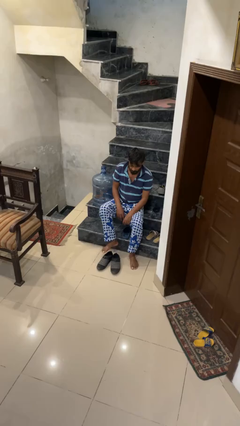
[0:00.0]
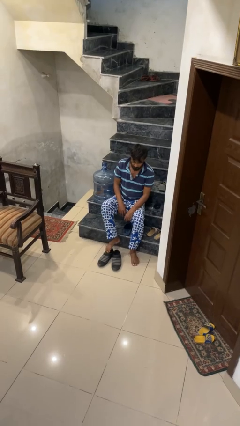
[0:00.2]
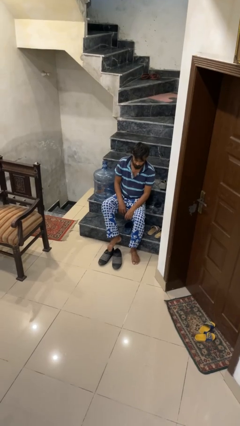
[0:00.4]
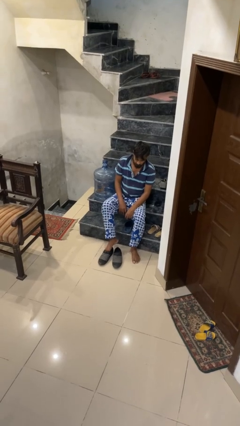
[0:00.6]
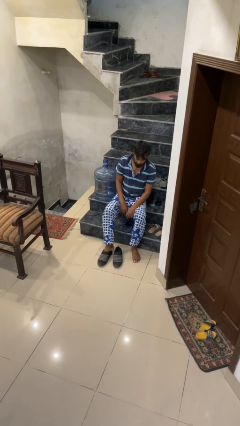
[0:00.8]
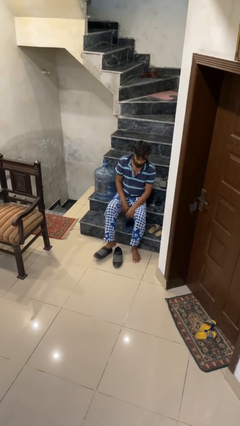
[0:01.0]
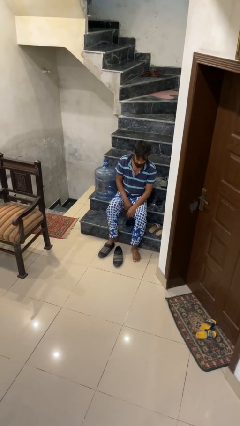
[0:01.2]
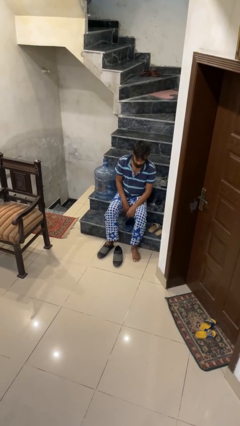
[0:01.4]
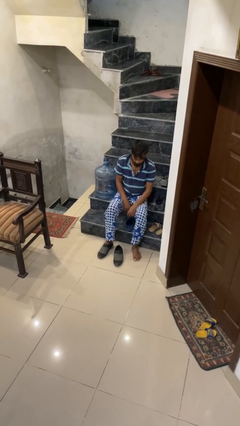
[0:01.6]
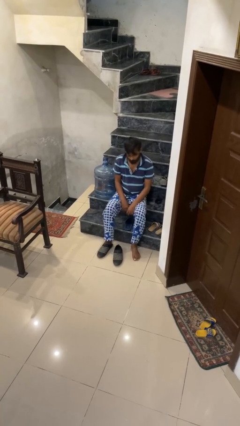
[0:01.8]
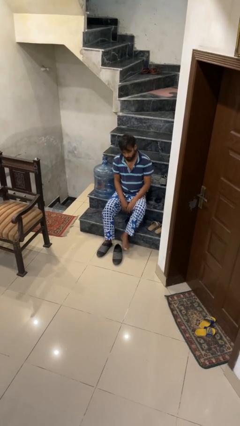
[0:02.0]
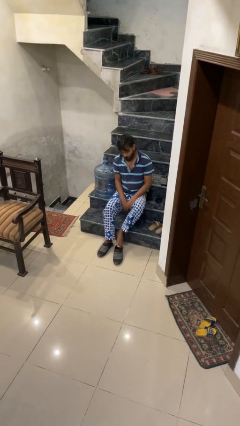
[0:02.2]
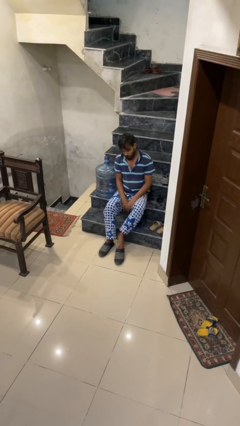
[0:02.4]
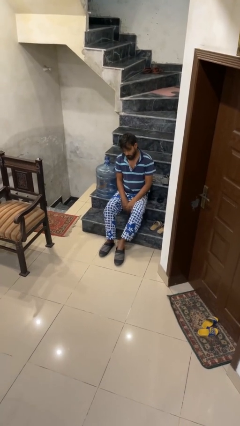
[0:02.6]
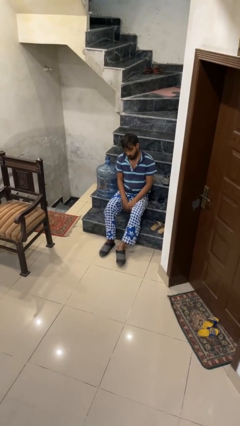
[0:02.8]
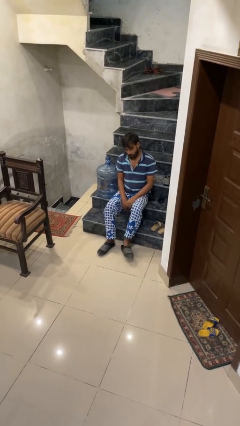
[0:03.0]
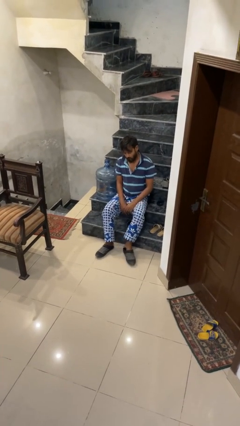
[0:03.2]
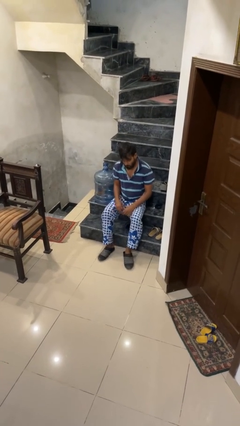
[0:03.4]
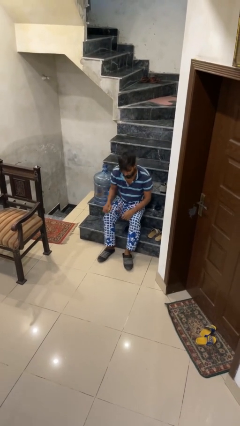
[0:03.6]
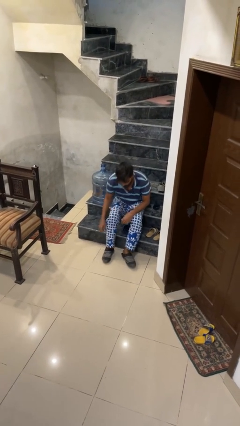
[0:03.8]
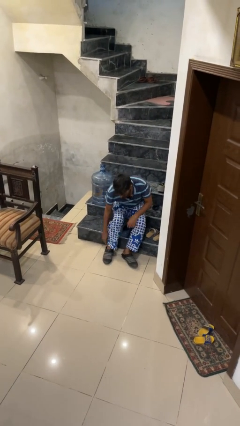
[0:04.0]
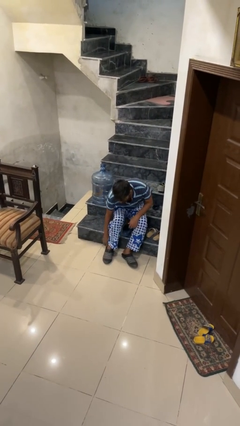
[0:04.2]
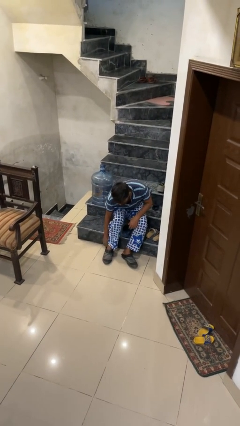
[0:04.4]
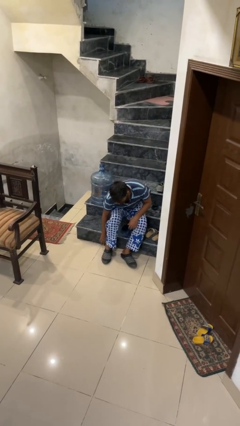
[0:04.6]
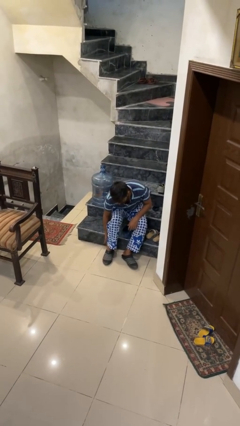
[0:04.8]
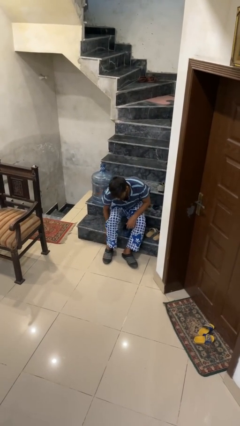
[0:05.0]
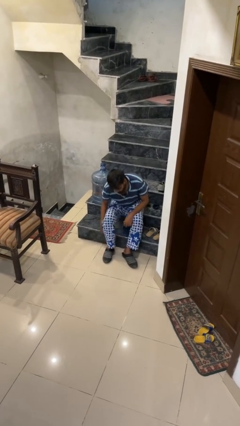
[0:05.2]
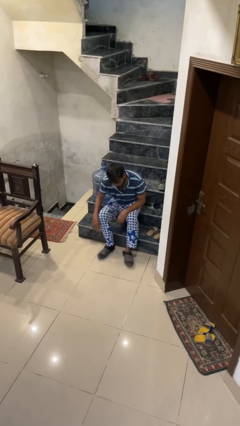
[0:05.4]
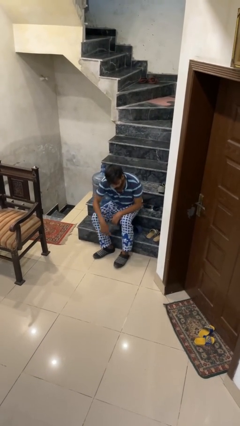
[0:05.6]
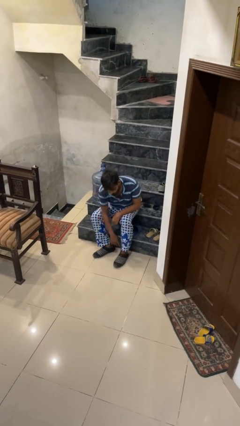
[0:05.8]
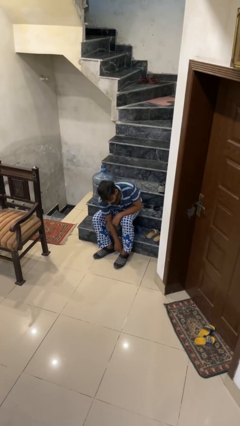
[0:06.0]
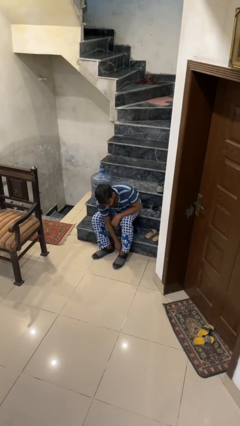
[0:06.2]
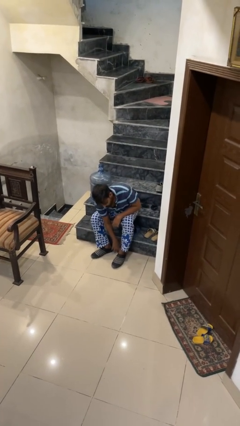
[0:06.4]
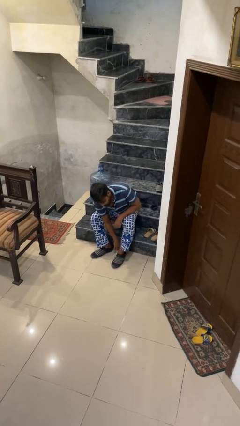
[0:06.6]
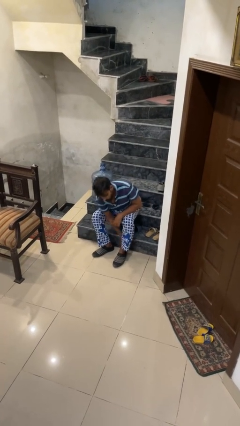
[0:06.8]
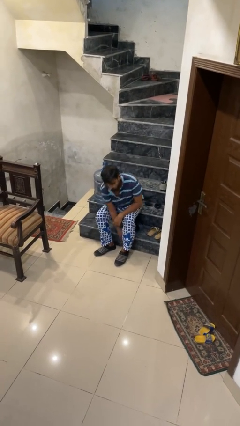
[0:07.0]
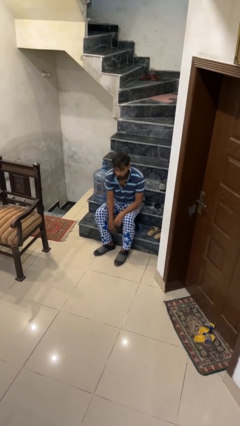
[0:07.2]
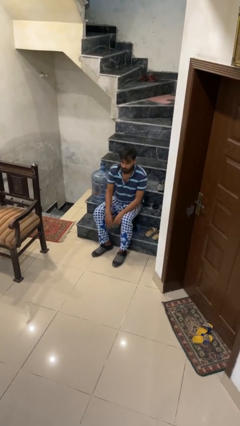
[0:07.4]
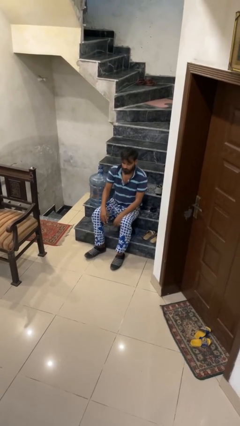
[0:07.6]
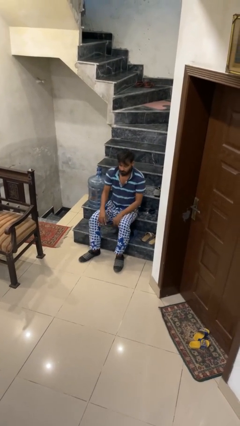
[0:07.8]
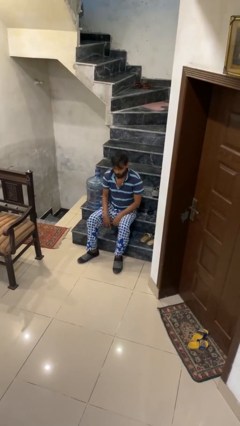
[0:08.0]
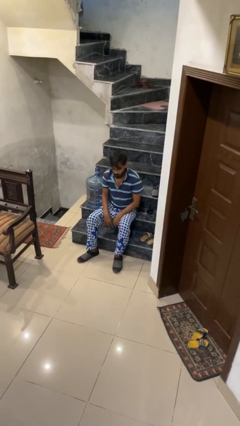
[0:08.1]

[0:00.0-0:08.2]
person puts on shoes

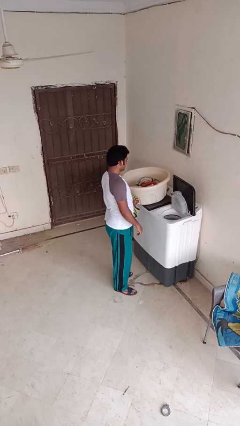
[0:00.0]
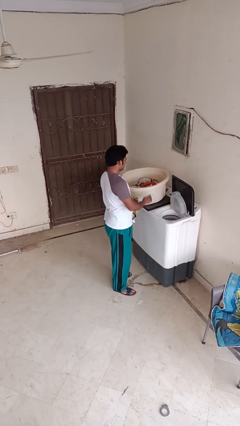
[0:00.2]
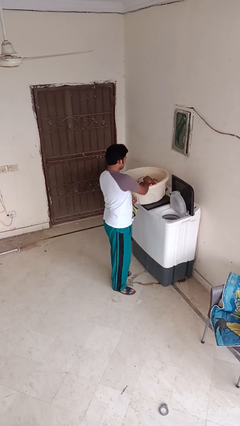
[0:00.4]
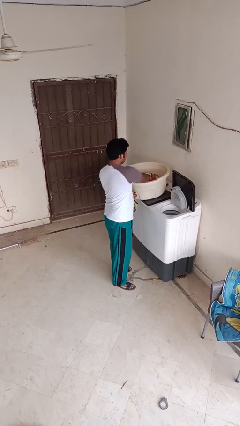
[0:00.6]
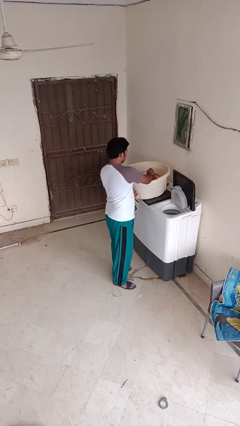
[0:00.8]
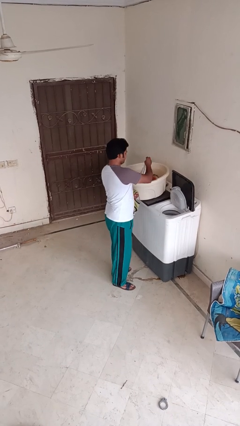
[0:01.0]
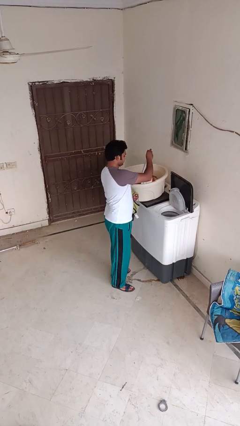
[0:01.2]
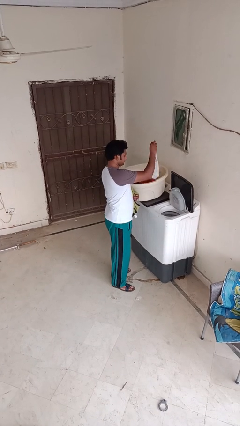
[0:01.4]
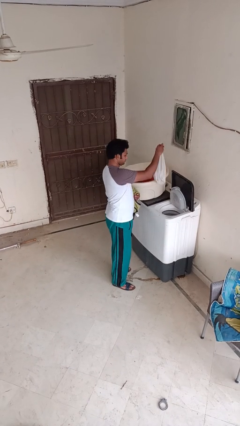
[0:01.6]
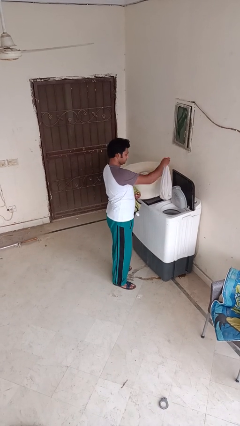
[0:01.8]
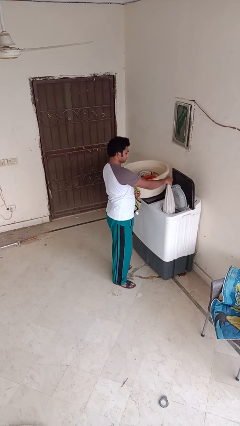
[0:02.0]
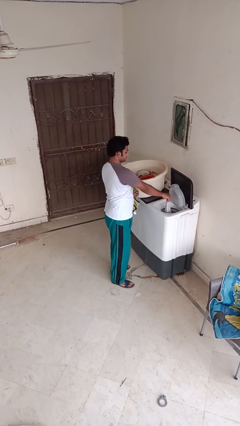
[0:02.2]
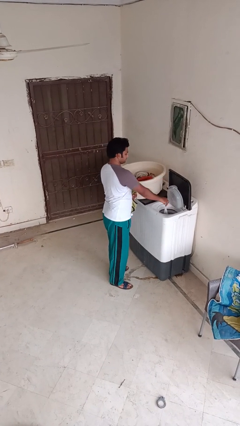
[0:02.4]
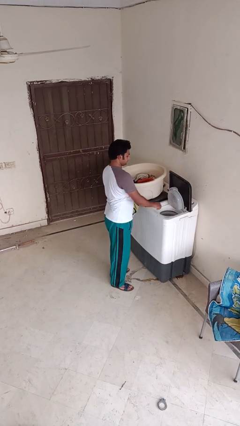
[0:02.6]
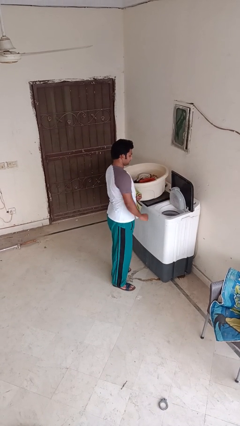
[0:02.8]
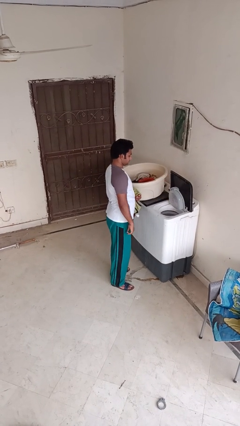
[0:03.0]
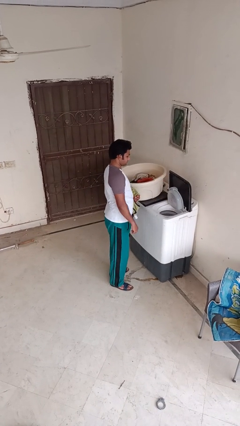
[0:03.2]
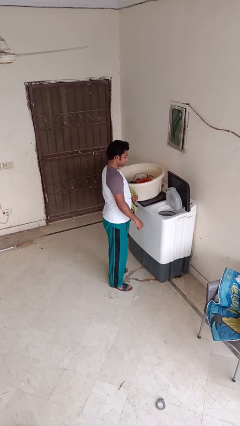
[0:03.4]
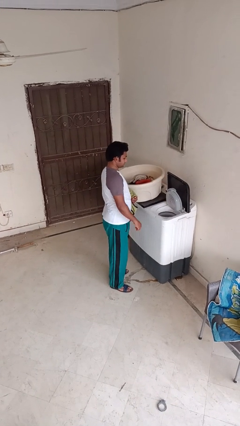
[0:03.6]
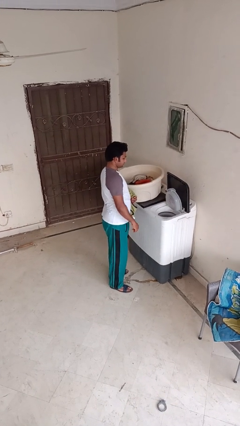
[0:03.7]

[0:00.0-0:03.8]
person loads dryer

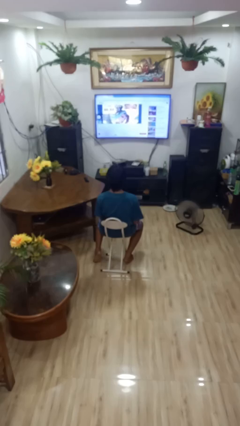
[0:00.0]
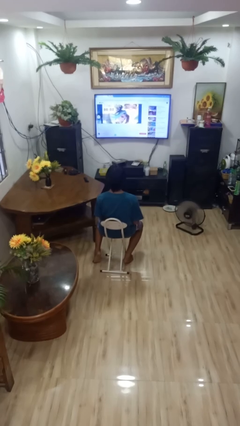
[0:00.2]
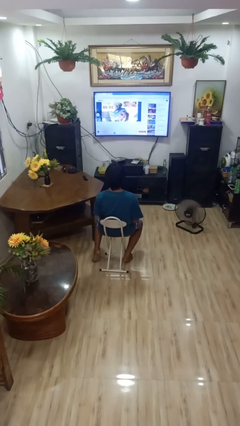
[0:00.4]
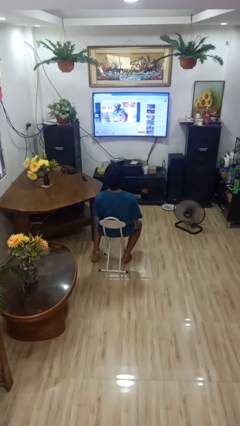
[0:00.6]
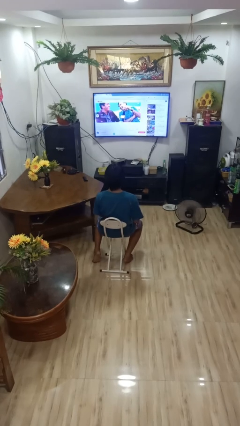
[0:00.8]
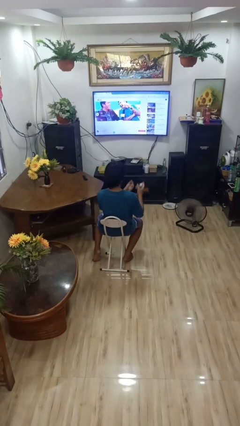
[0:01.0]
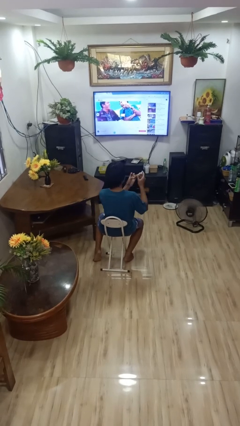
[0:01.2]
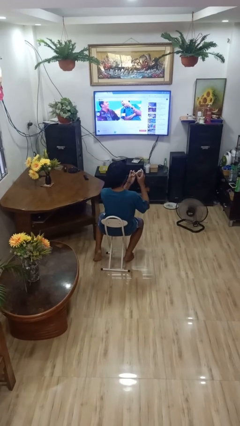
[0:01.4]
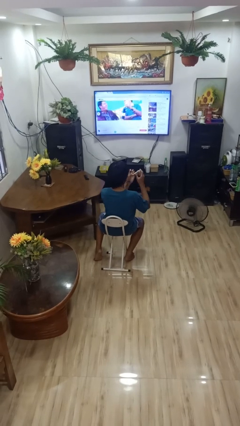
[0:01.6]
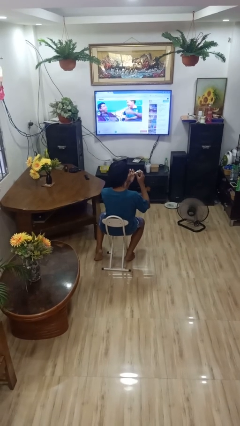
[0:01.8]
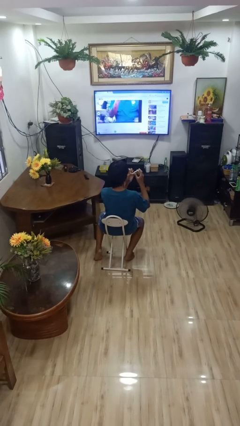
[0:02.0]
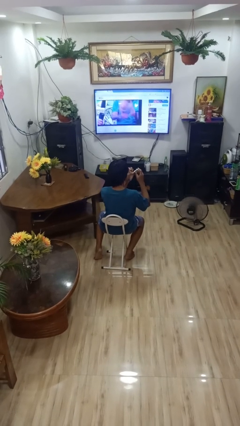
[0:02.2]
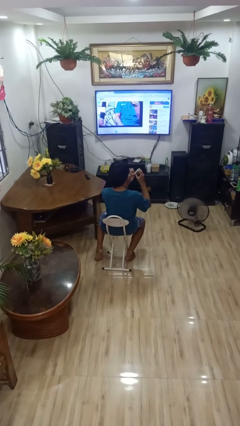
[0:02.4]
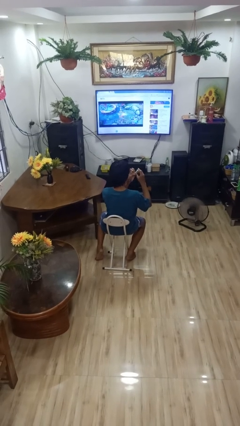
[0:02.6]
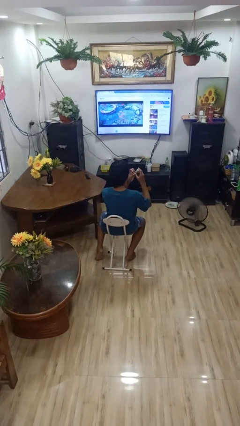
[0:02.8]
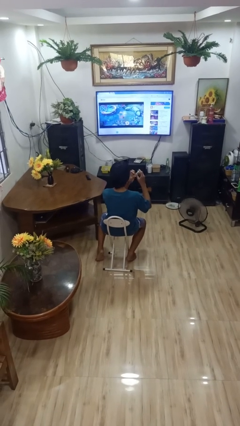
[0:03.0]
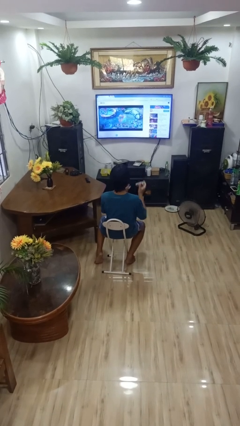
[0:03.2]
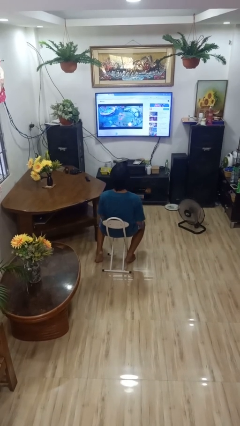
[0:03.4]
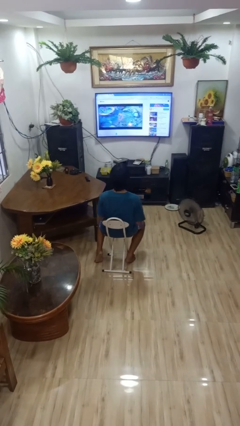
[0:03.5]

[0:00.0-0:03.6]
person clips fingernails

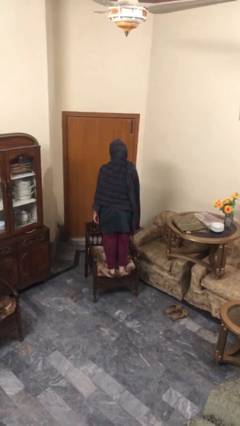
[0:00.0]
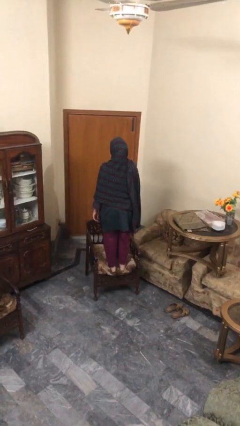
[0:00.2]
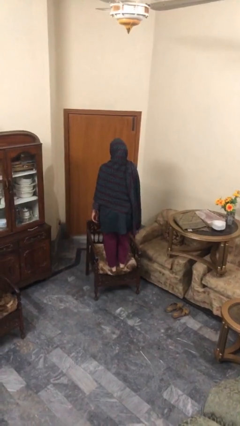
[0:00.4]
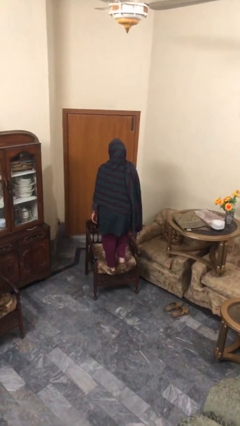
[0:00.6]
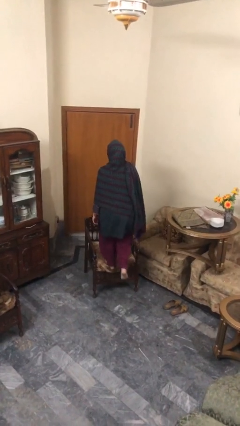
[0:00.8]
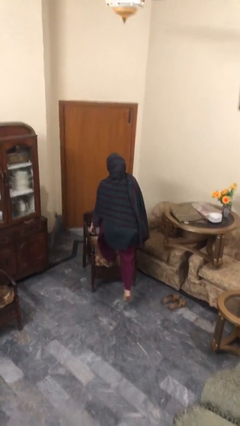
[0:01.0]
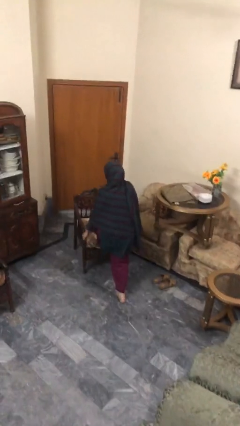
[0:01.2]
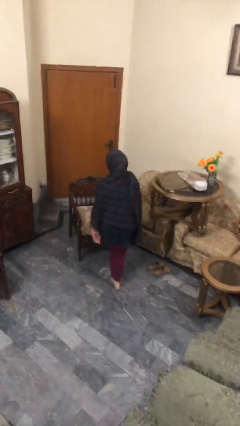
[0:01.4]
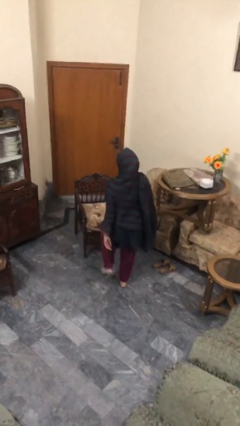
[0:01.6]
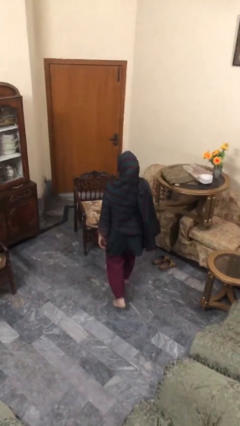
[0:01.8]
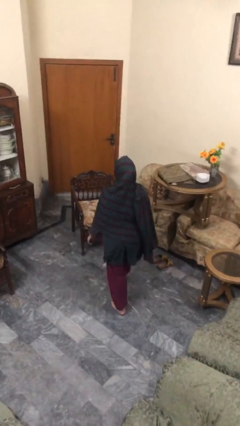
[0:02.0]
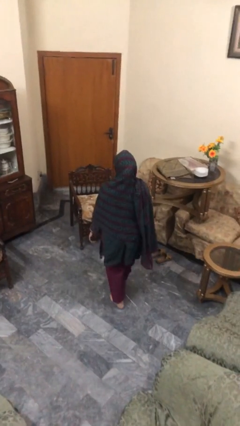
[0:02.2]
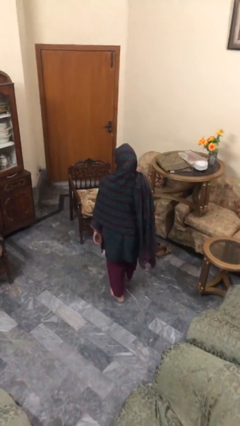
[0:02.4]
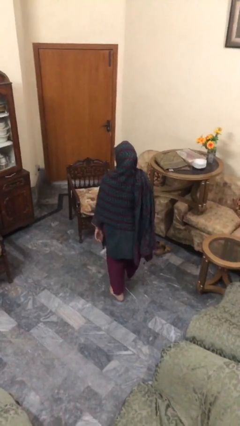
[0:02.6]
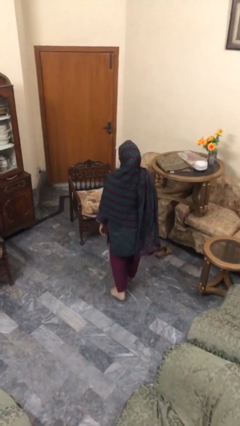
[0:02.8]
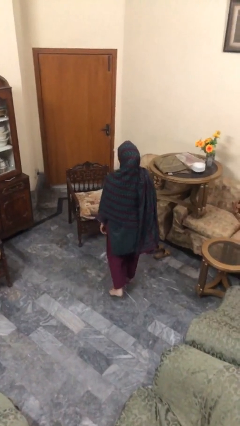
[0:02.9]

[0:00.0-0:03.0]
person climbs off chair
